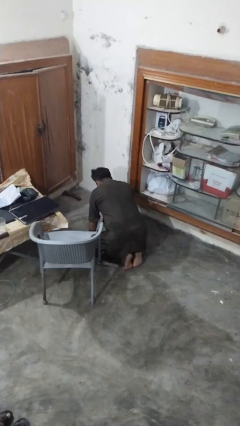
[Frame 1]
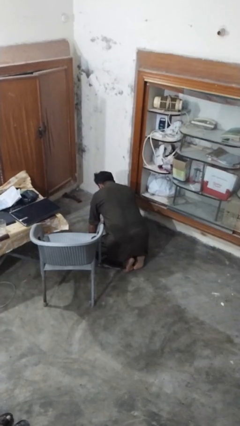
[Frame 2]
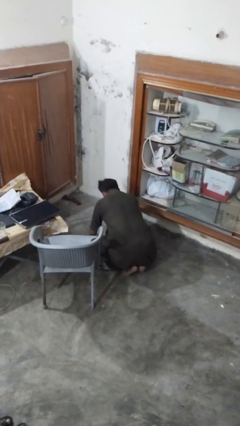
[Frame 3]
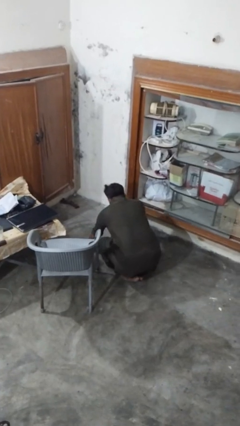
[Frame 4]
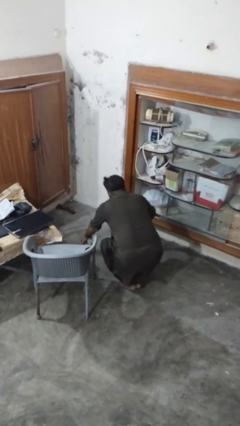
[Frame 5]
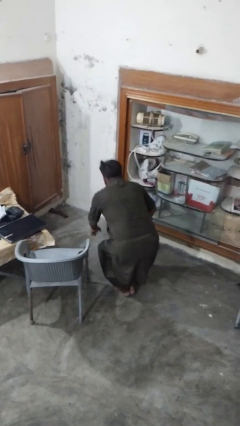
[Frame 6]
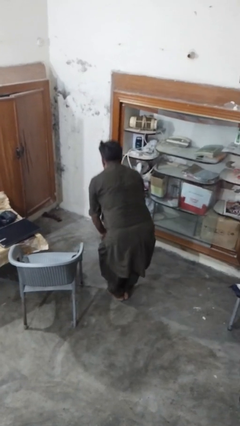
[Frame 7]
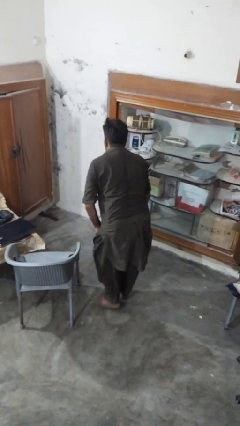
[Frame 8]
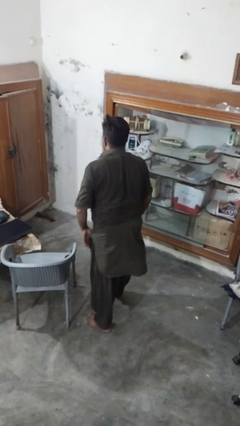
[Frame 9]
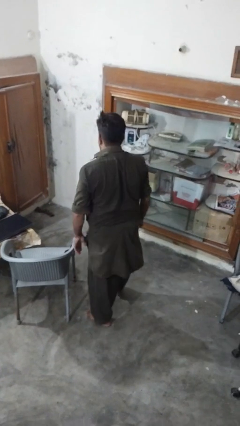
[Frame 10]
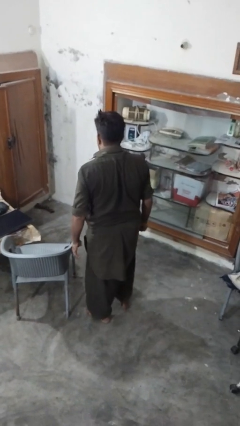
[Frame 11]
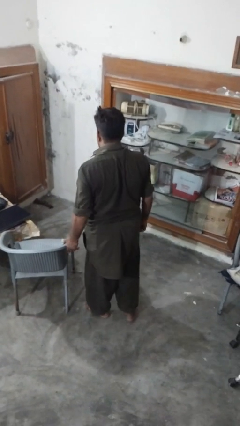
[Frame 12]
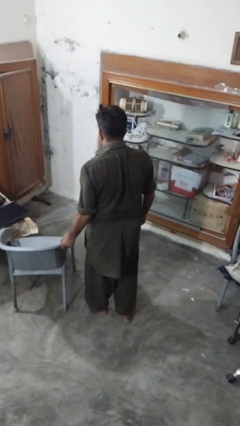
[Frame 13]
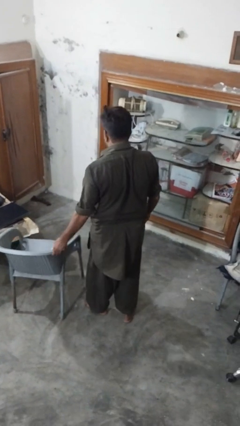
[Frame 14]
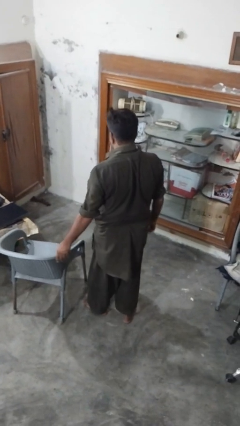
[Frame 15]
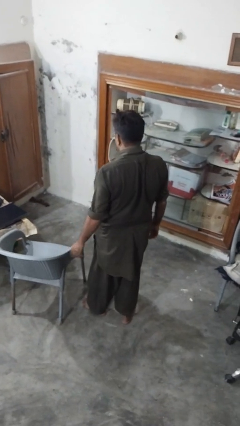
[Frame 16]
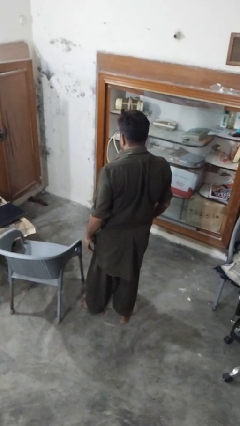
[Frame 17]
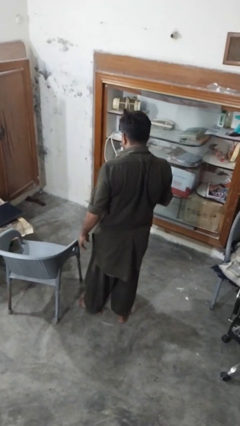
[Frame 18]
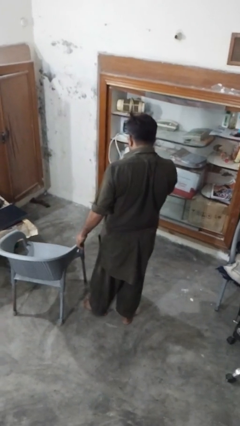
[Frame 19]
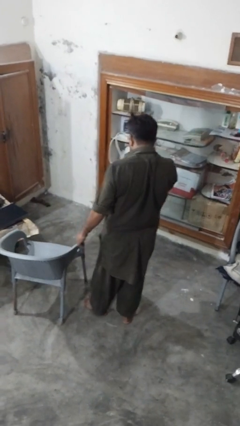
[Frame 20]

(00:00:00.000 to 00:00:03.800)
person stands up from floor

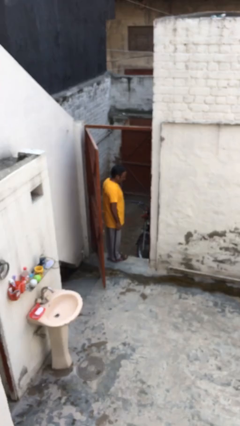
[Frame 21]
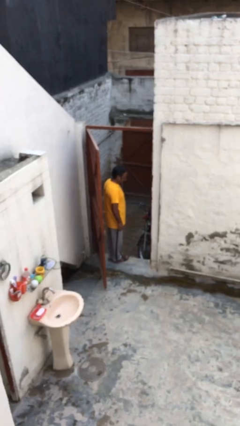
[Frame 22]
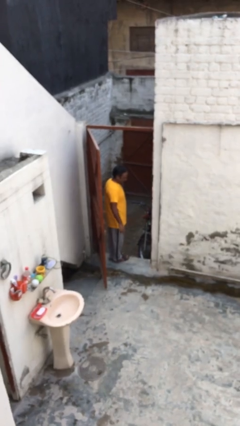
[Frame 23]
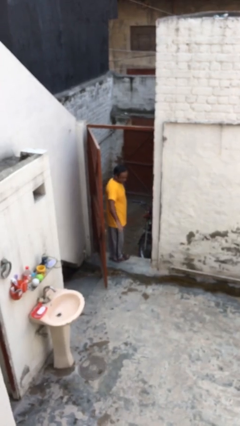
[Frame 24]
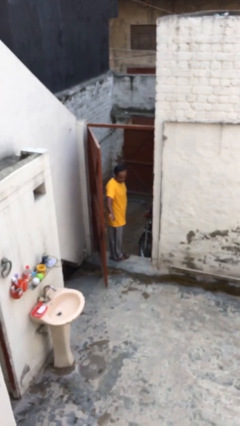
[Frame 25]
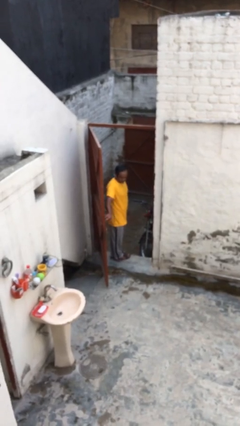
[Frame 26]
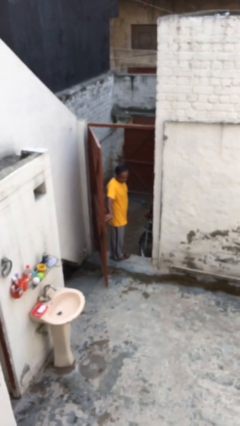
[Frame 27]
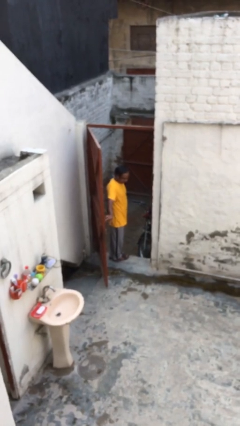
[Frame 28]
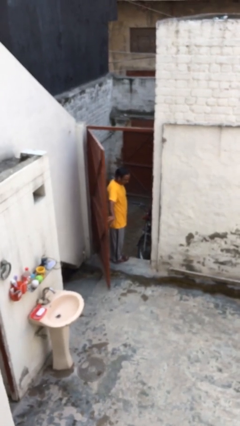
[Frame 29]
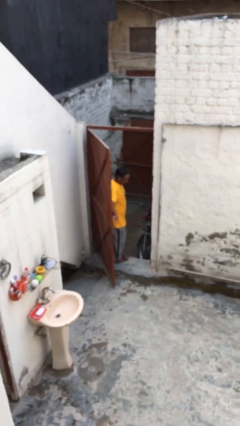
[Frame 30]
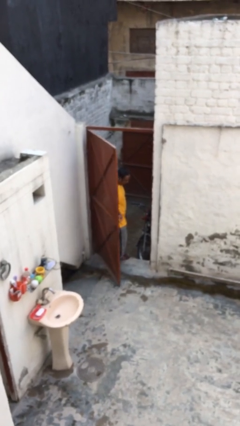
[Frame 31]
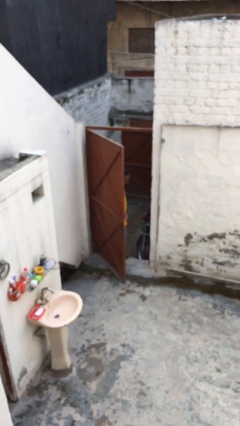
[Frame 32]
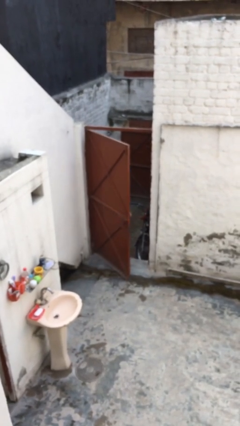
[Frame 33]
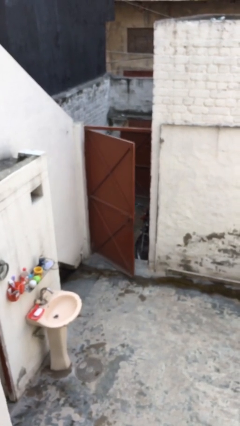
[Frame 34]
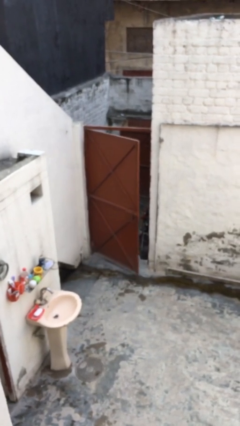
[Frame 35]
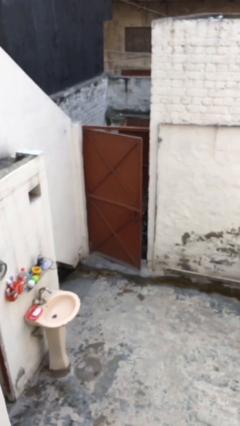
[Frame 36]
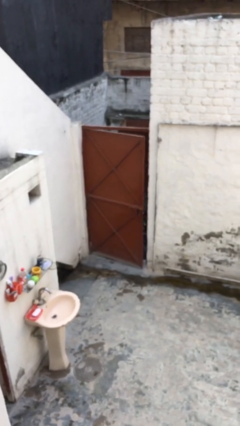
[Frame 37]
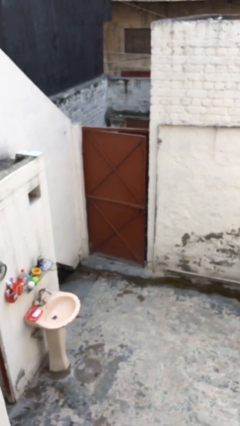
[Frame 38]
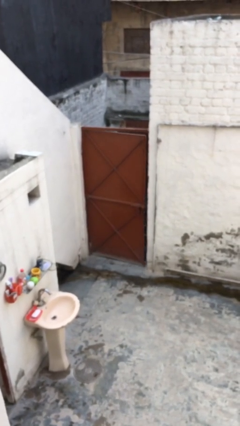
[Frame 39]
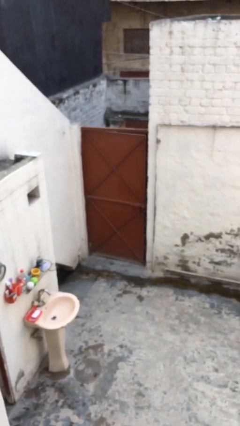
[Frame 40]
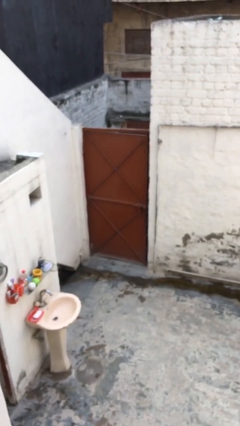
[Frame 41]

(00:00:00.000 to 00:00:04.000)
person closes facility door

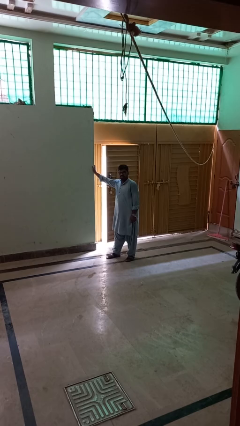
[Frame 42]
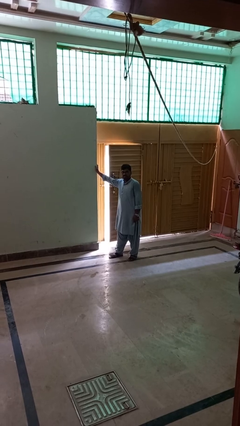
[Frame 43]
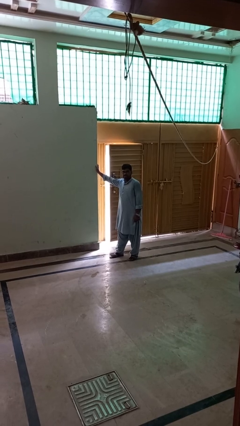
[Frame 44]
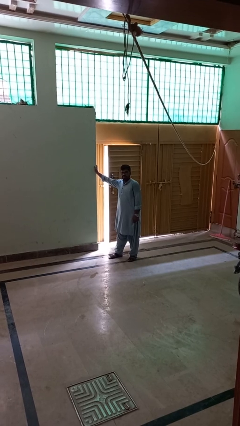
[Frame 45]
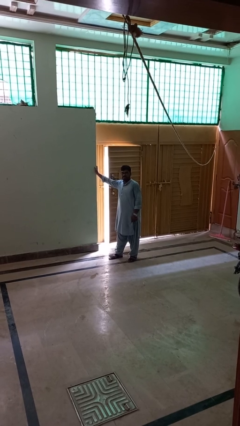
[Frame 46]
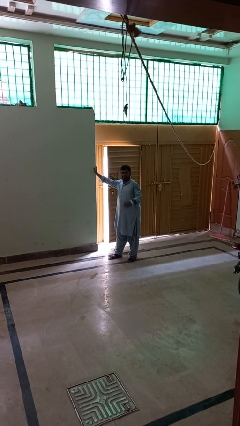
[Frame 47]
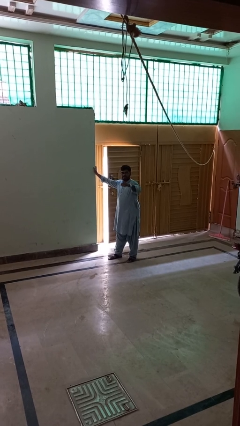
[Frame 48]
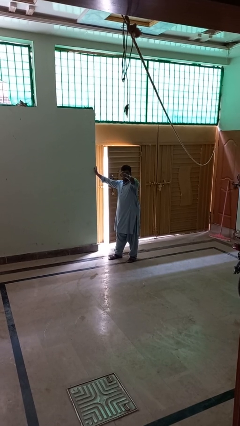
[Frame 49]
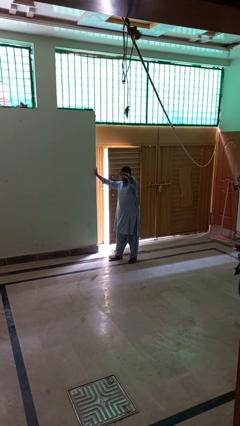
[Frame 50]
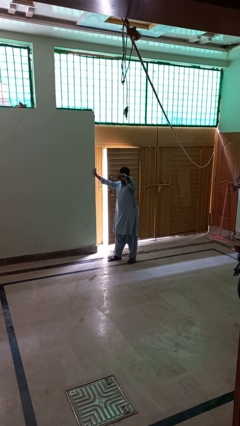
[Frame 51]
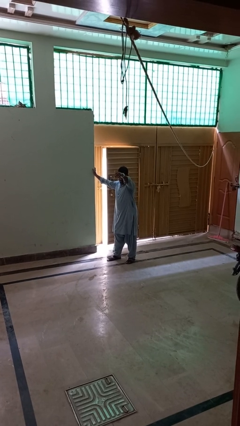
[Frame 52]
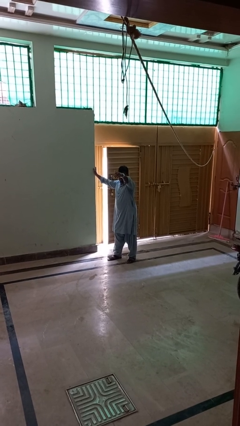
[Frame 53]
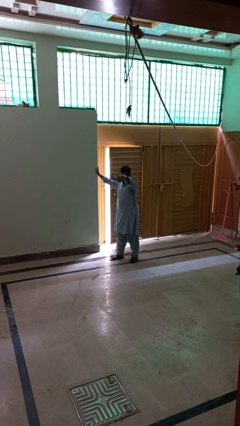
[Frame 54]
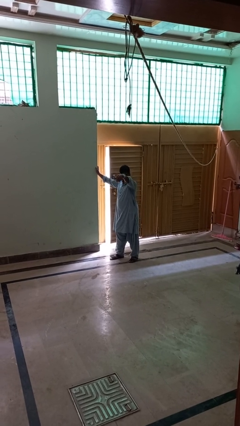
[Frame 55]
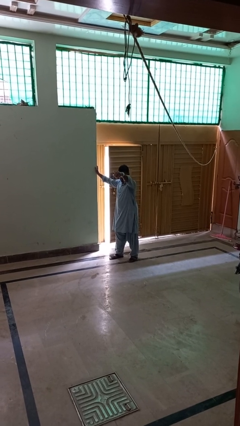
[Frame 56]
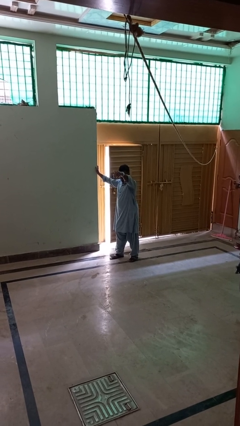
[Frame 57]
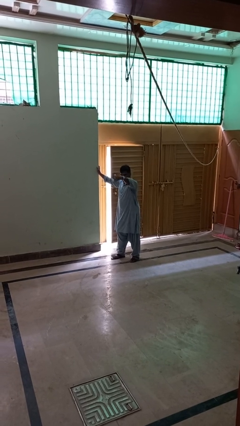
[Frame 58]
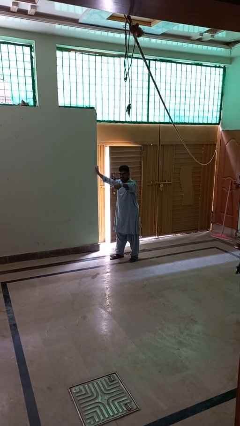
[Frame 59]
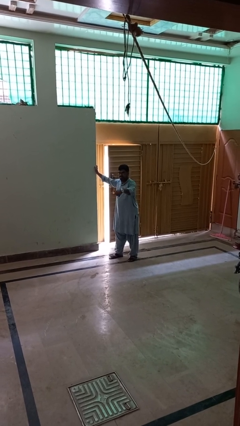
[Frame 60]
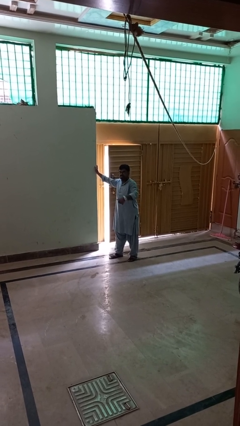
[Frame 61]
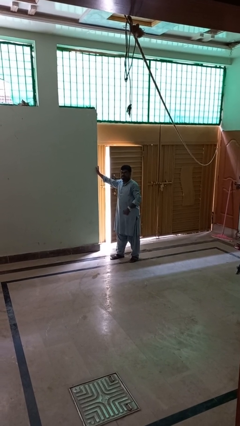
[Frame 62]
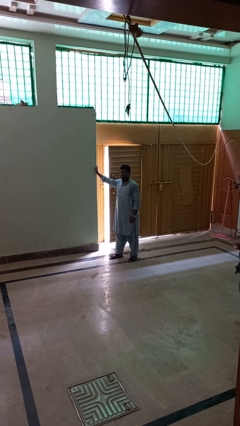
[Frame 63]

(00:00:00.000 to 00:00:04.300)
person gestures come here

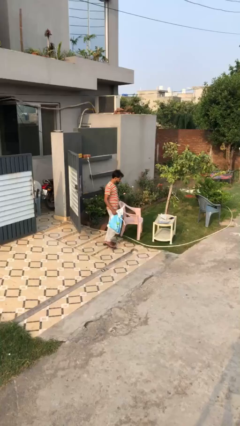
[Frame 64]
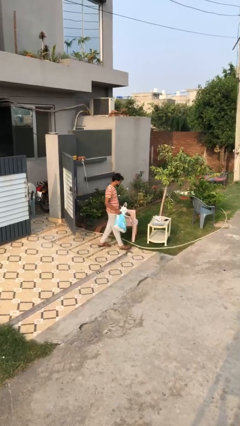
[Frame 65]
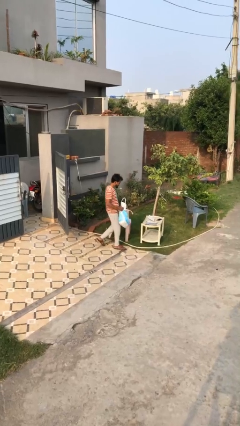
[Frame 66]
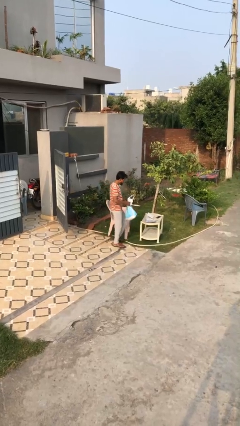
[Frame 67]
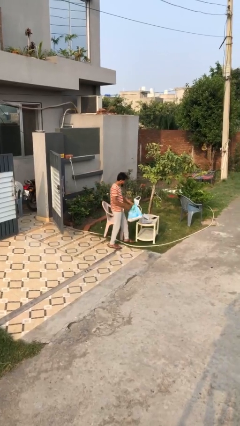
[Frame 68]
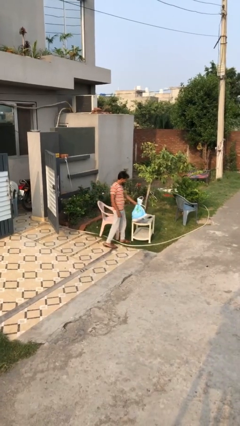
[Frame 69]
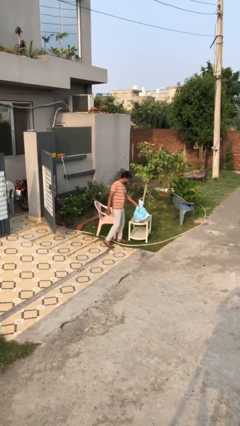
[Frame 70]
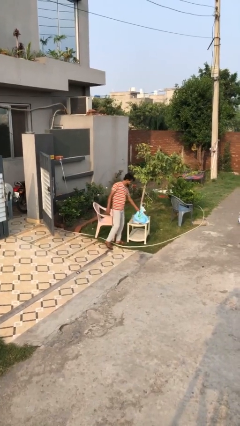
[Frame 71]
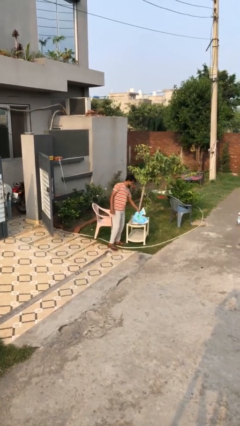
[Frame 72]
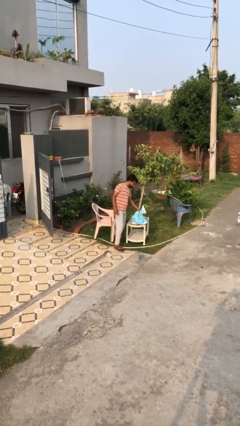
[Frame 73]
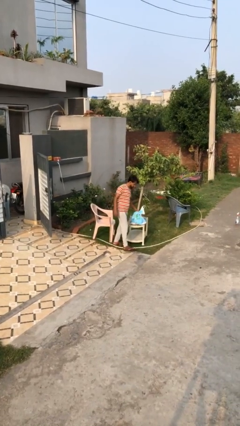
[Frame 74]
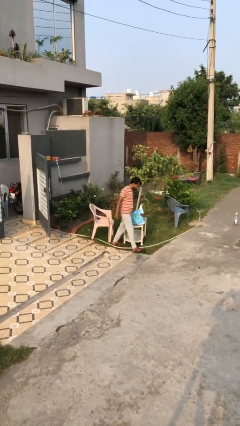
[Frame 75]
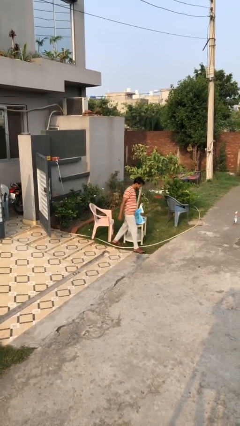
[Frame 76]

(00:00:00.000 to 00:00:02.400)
person puts down object on table

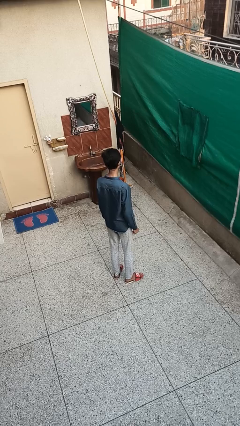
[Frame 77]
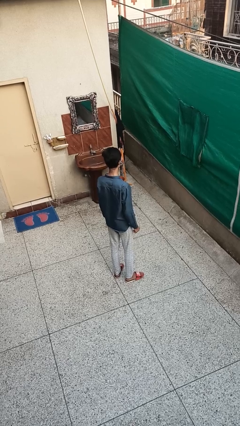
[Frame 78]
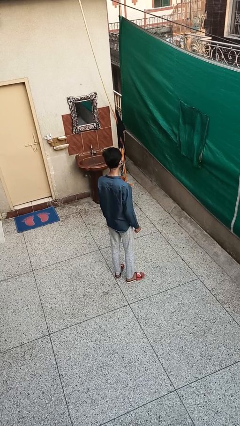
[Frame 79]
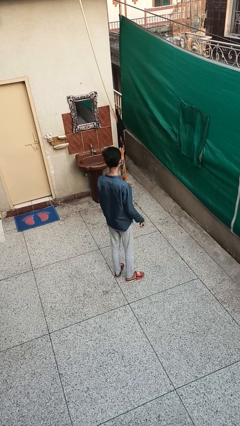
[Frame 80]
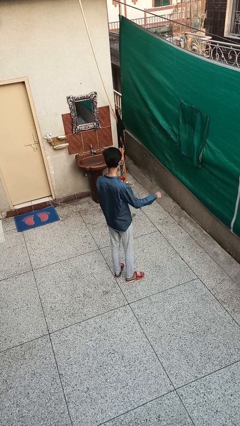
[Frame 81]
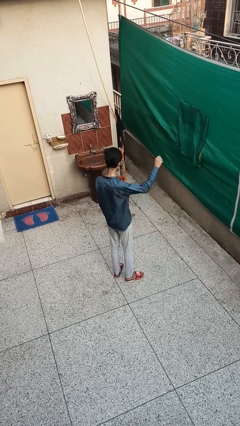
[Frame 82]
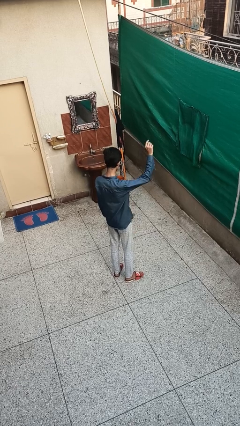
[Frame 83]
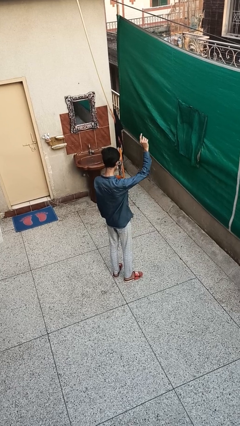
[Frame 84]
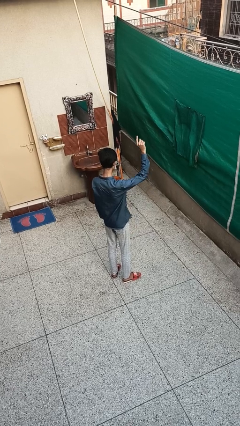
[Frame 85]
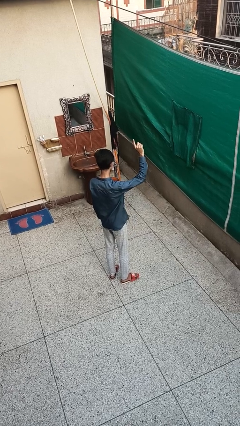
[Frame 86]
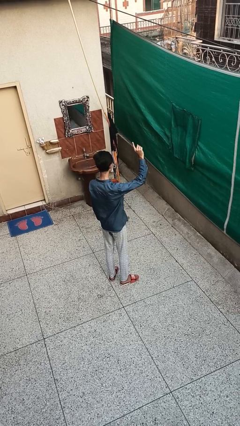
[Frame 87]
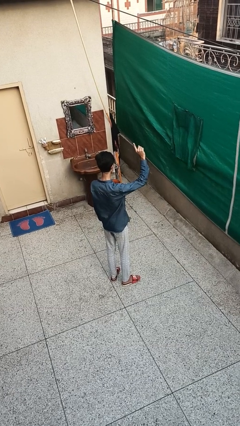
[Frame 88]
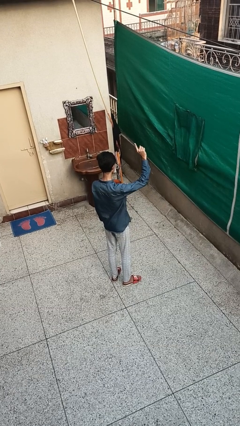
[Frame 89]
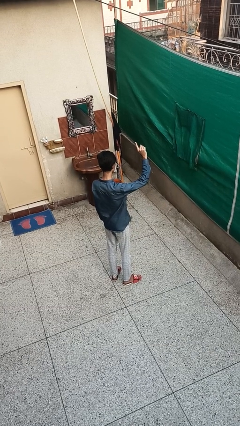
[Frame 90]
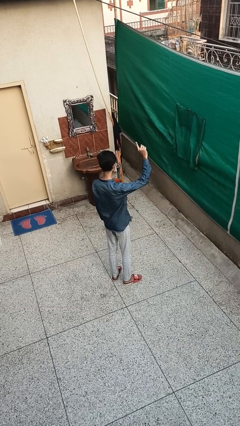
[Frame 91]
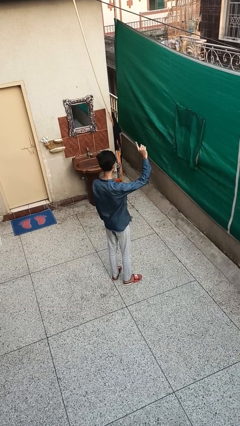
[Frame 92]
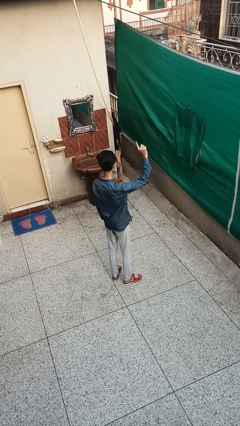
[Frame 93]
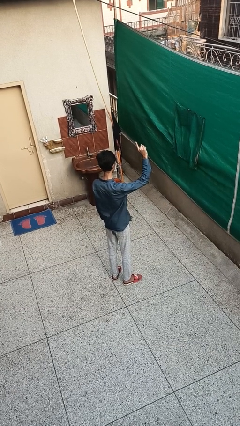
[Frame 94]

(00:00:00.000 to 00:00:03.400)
person gestures raise hand
